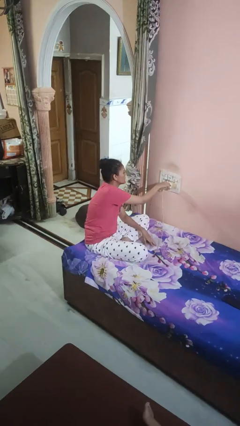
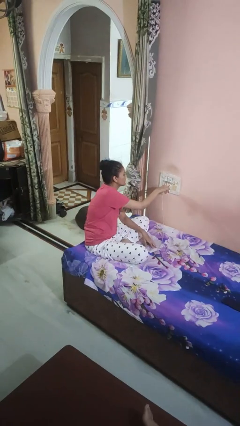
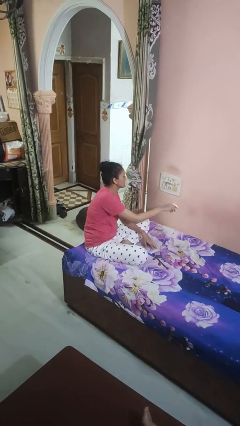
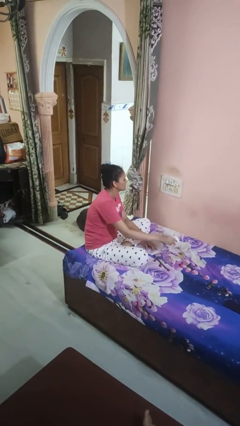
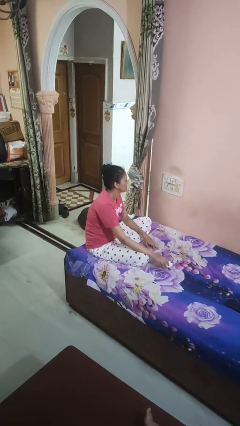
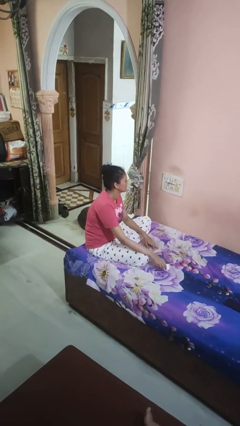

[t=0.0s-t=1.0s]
person unplugs from electrical socket

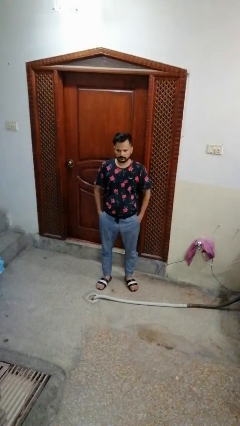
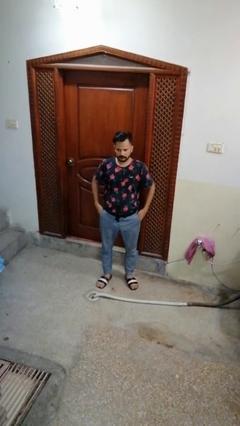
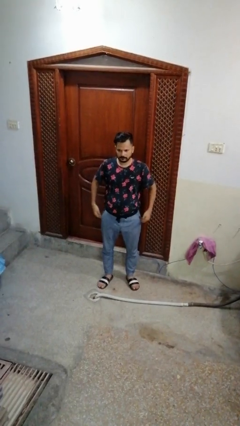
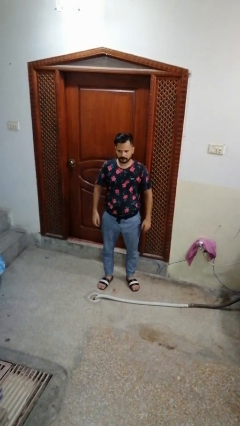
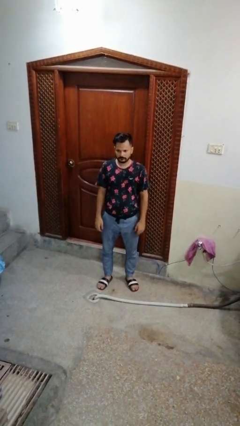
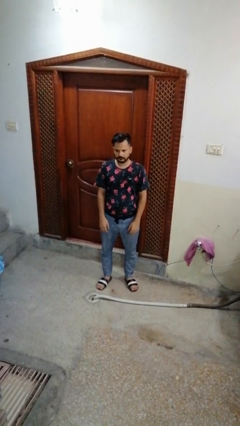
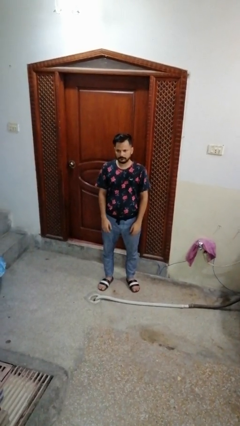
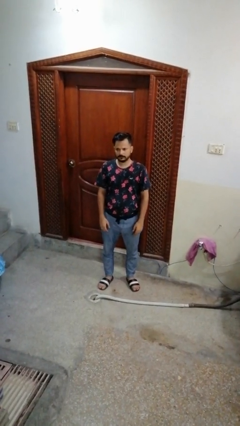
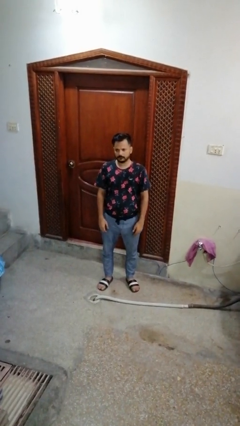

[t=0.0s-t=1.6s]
person puts hands in back pockets

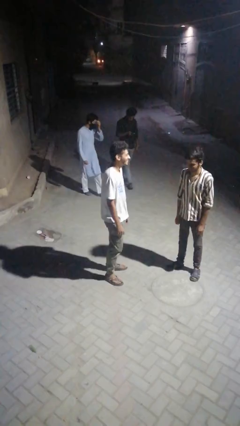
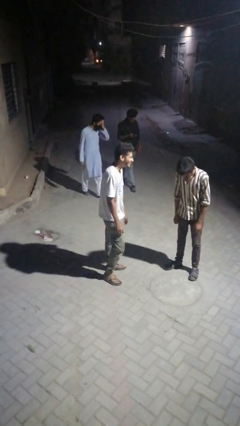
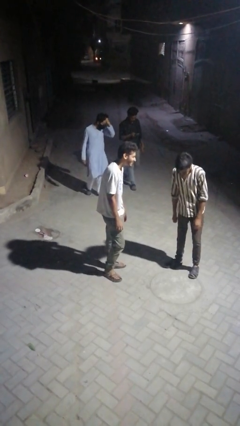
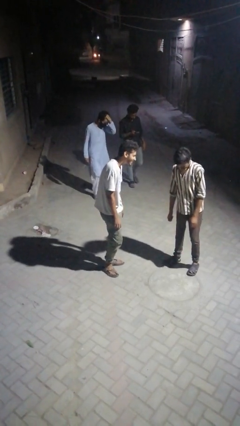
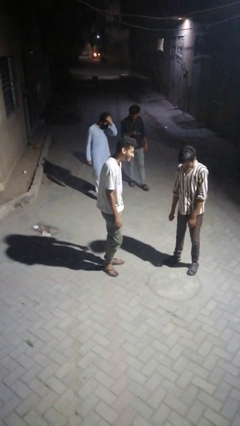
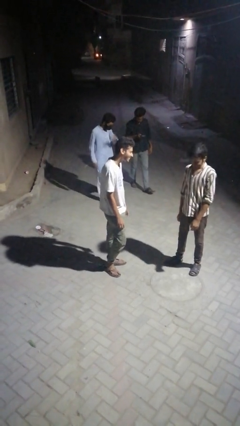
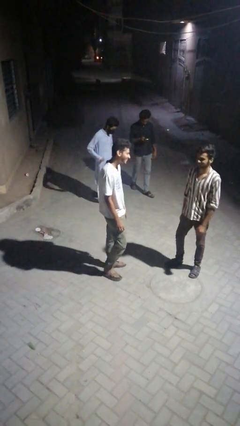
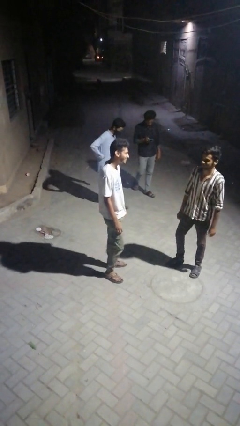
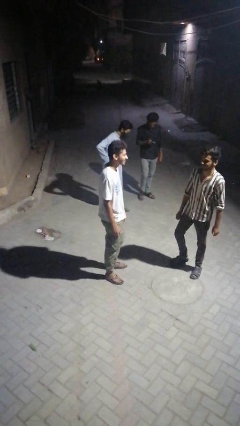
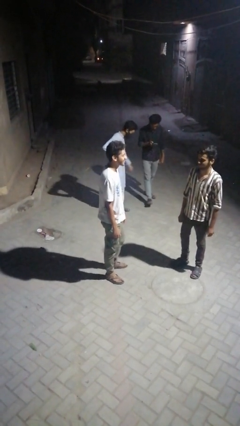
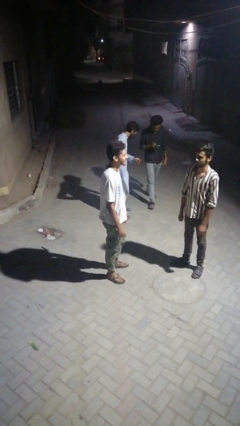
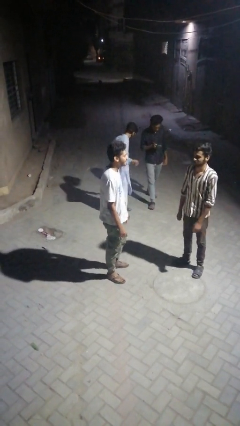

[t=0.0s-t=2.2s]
person laughs with person

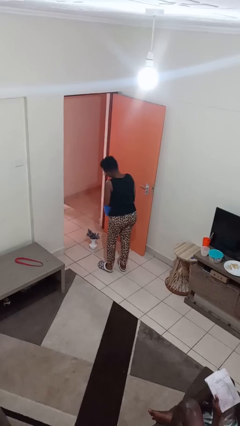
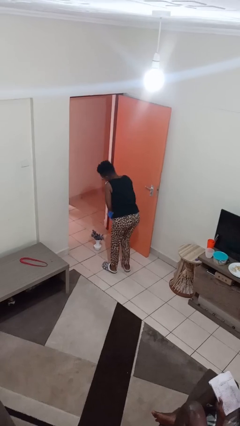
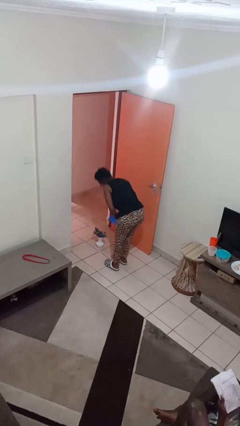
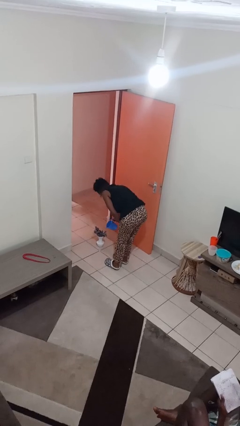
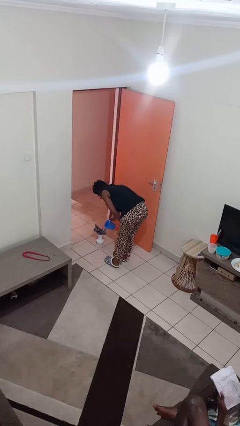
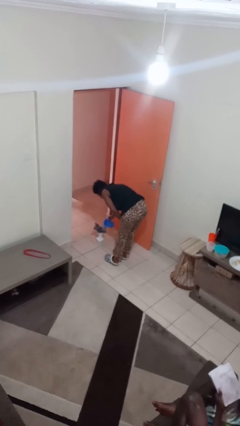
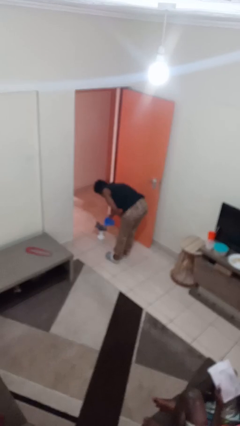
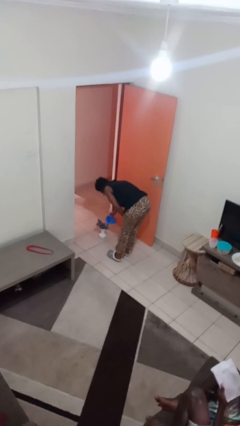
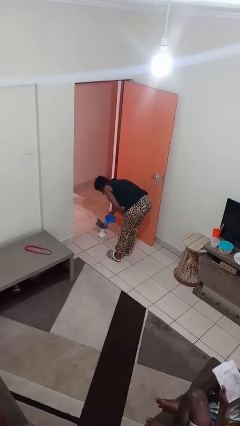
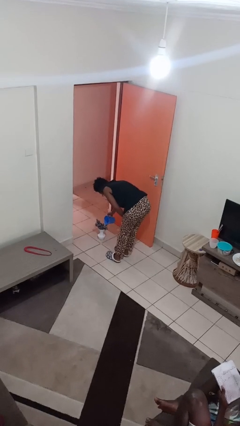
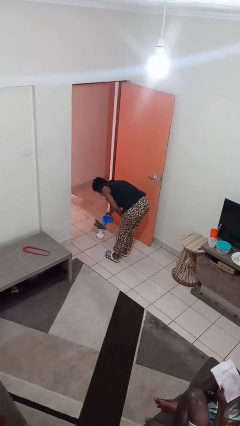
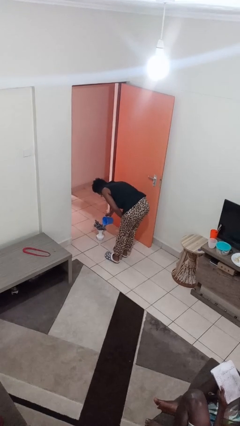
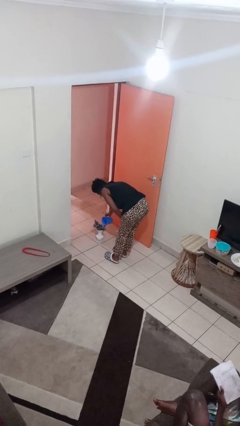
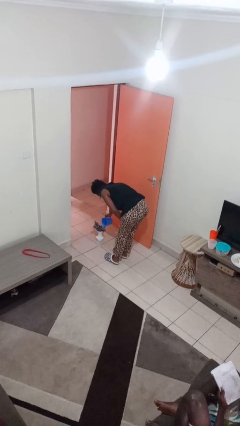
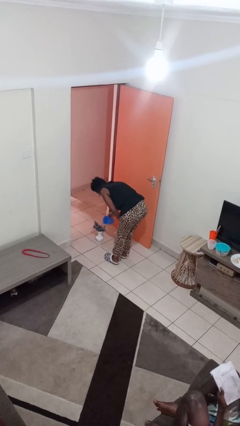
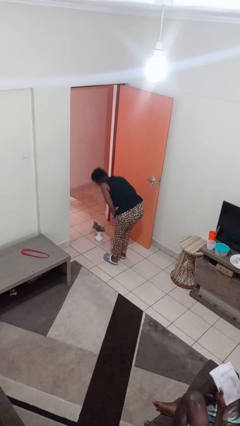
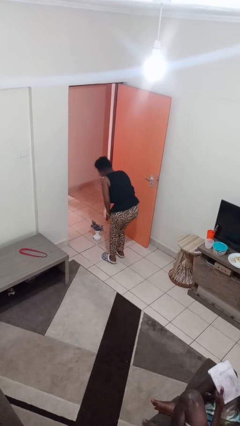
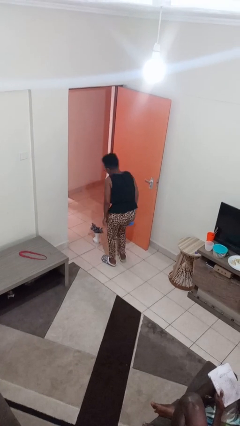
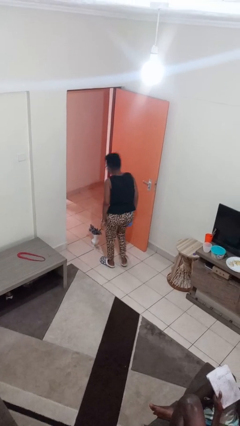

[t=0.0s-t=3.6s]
person waters houseplant

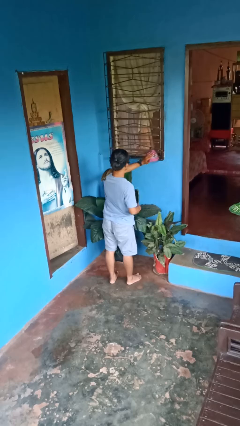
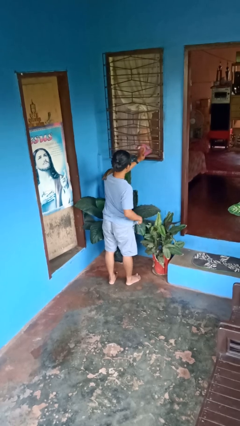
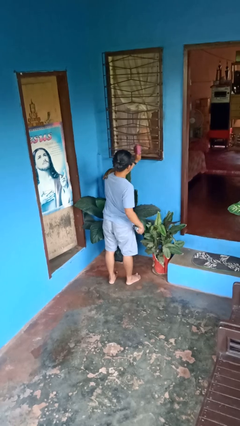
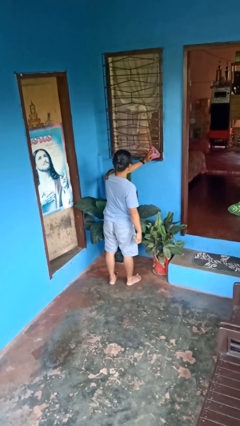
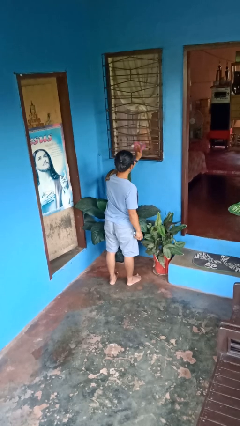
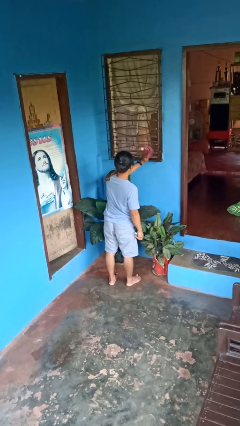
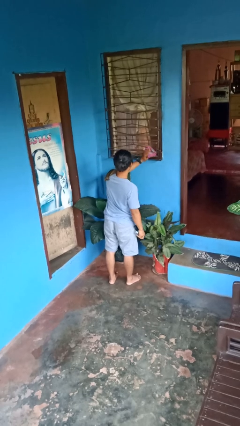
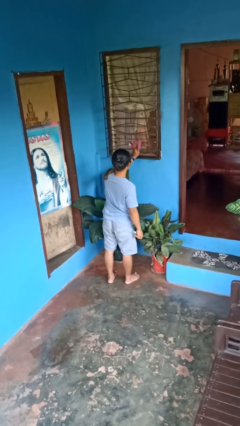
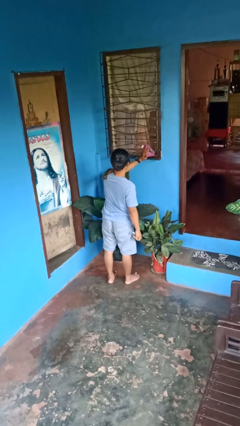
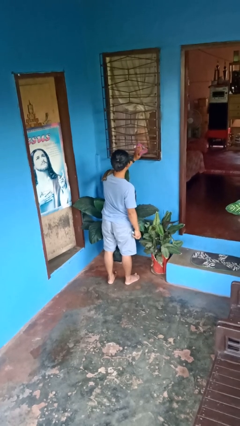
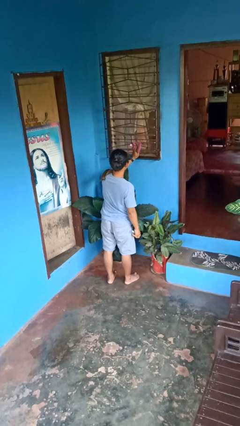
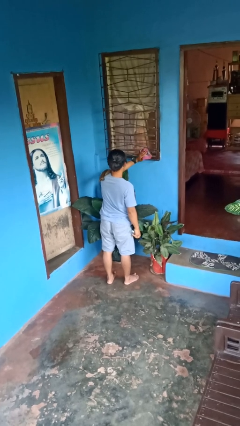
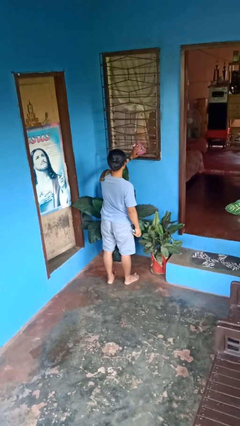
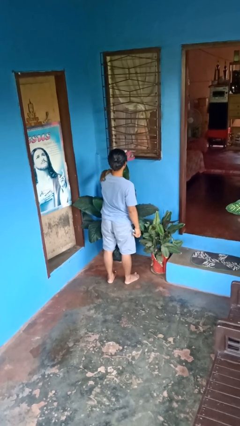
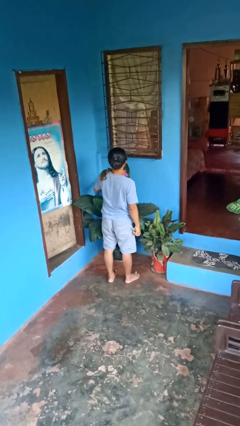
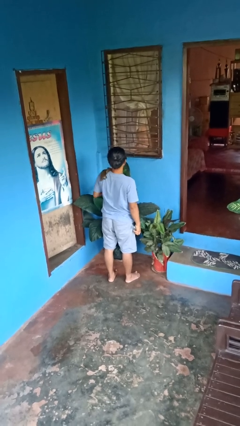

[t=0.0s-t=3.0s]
person washes window

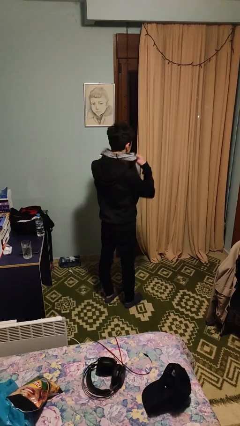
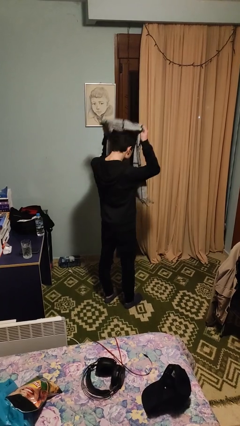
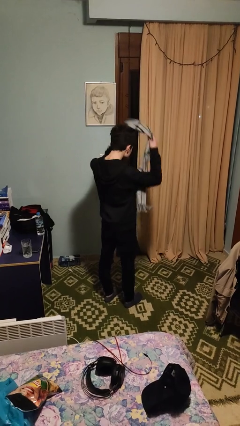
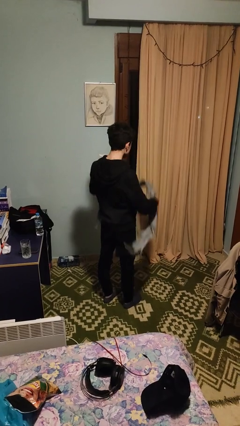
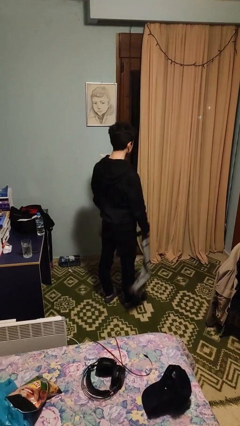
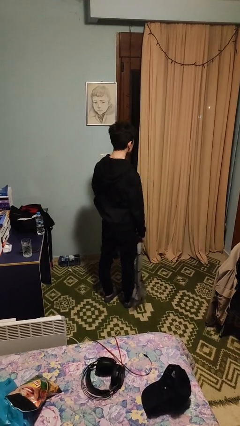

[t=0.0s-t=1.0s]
person takes off scarf

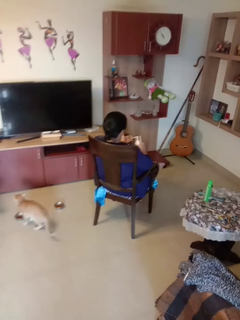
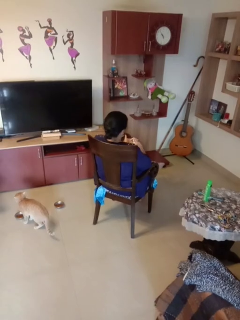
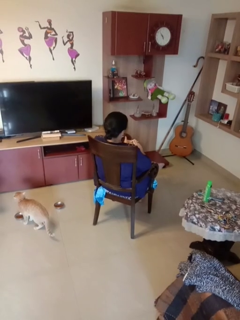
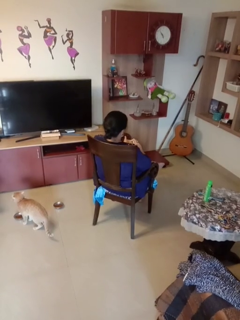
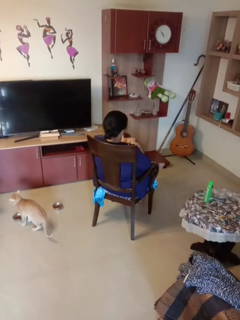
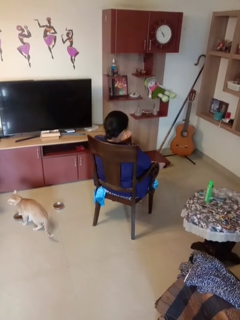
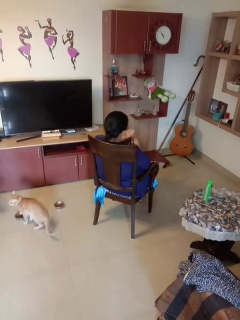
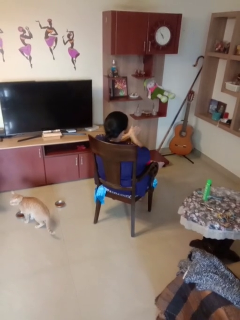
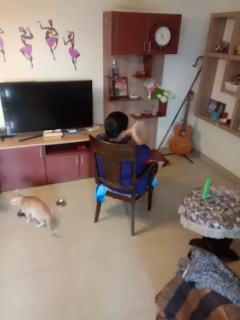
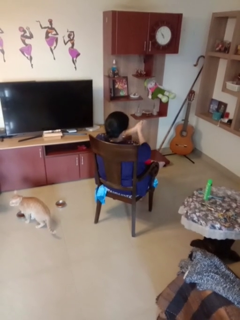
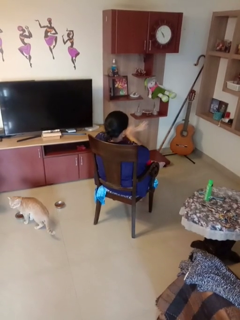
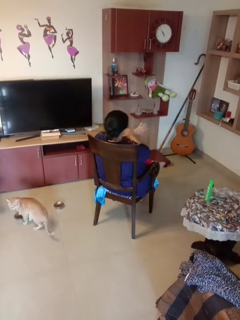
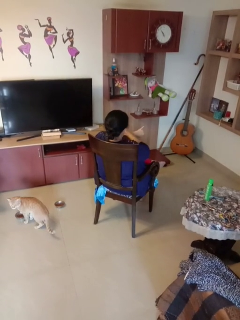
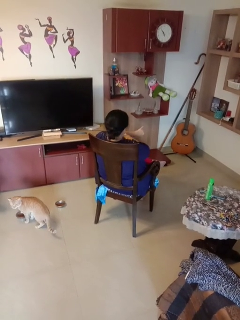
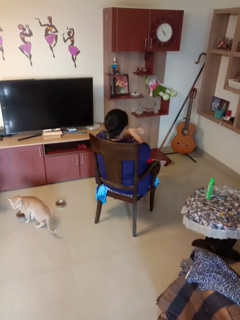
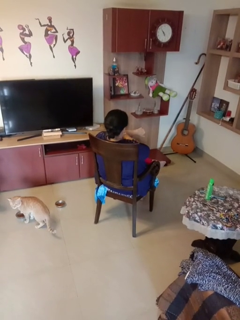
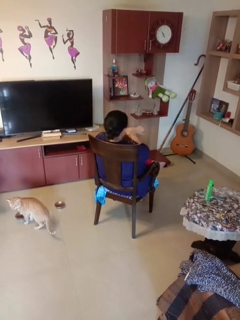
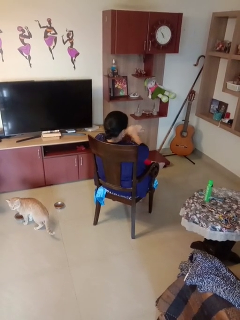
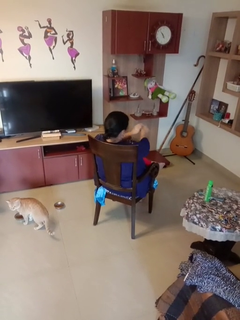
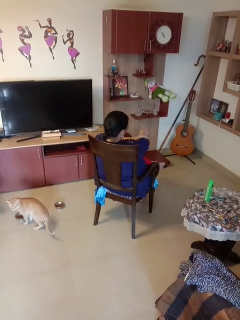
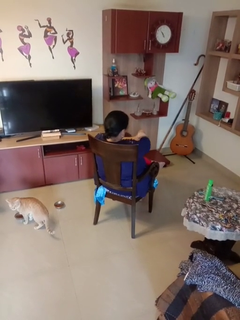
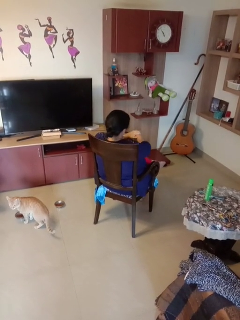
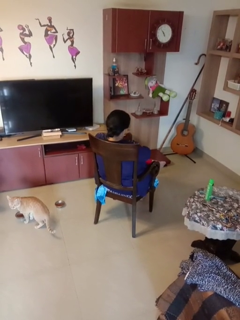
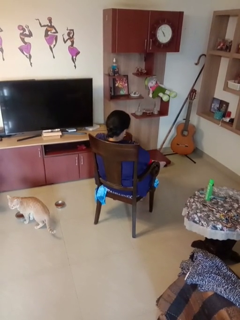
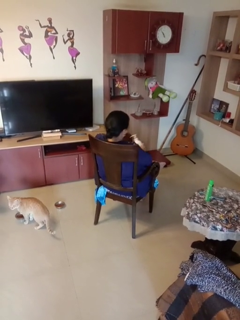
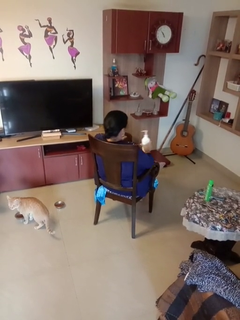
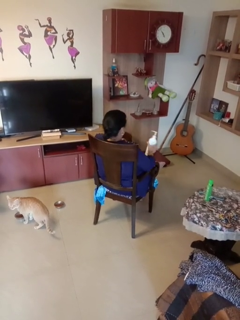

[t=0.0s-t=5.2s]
person applies sunscreen

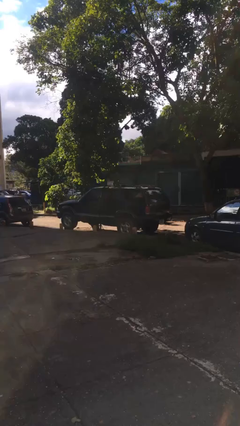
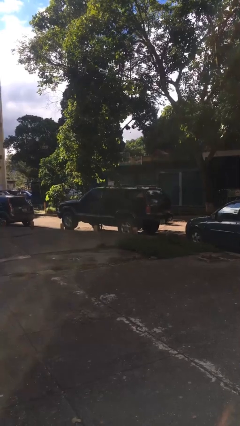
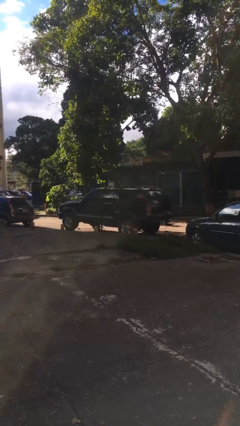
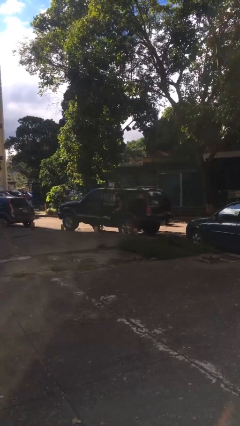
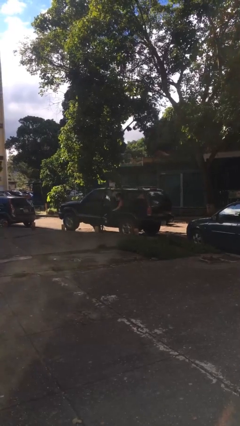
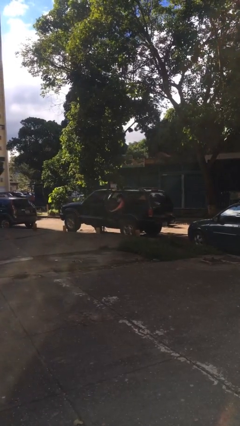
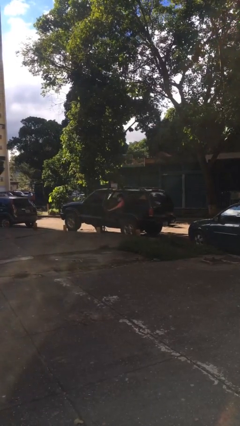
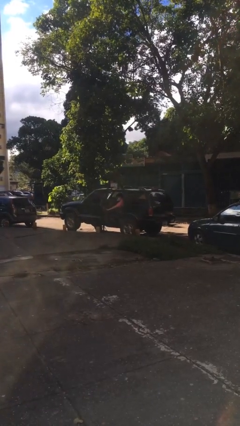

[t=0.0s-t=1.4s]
person opens car door
